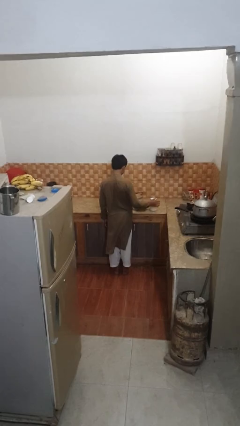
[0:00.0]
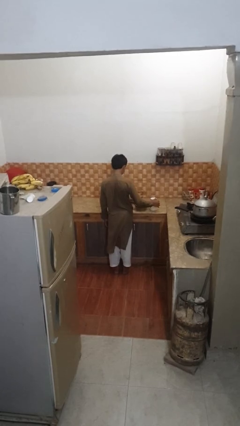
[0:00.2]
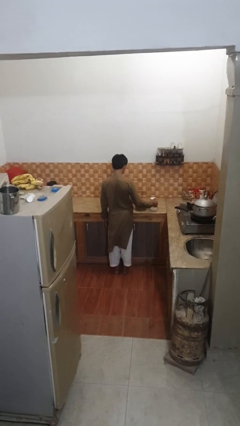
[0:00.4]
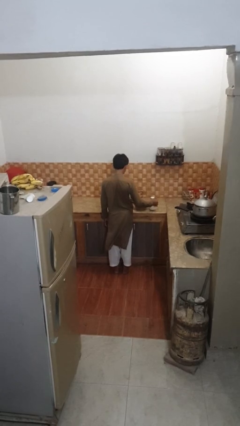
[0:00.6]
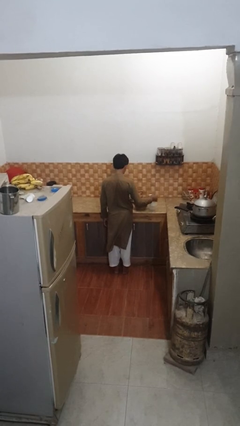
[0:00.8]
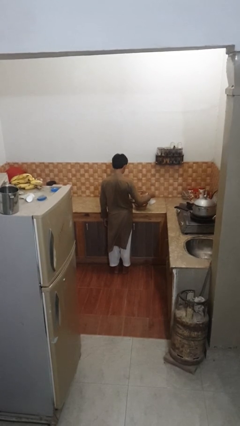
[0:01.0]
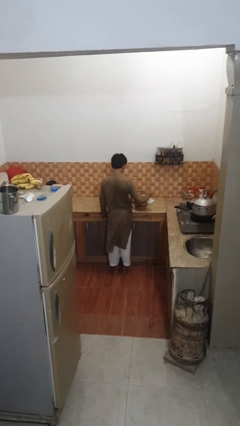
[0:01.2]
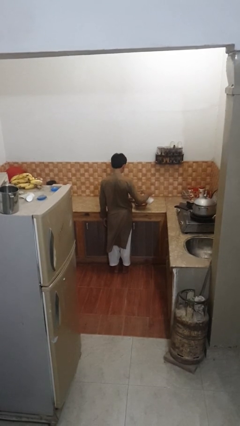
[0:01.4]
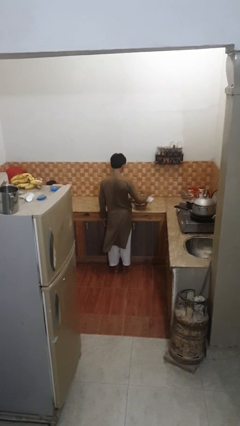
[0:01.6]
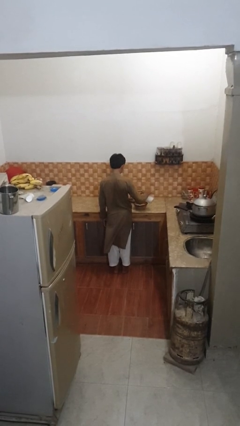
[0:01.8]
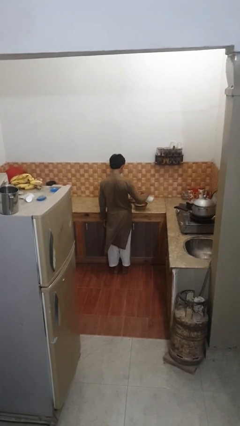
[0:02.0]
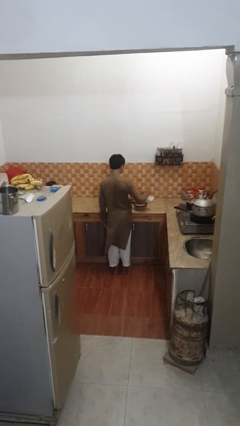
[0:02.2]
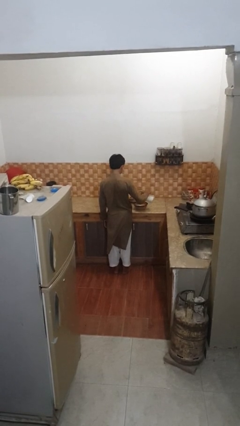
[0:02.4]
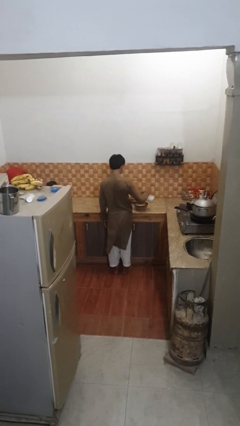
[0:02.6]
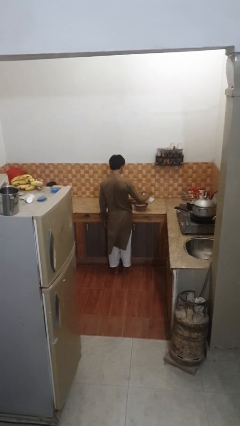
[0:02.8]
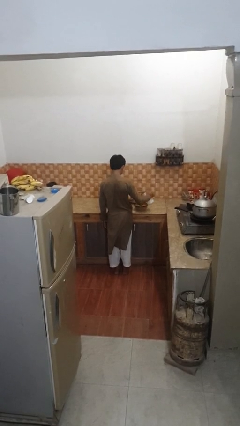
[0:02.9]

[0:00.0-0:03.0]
person pours into bowl

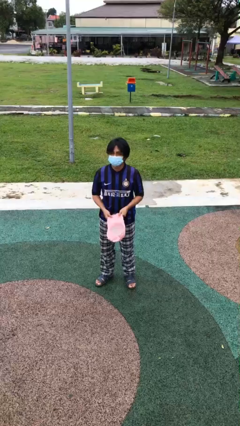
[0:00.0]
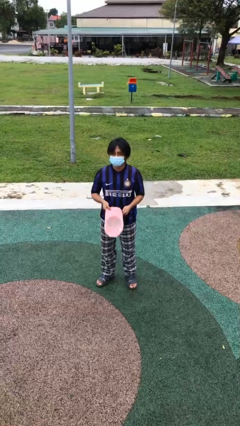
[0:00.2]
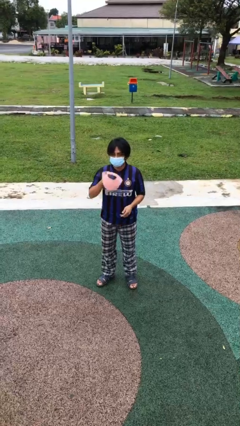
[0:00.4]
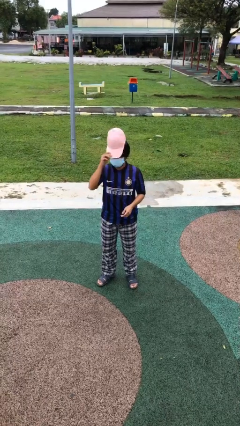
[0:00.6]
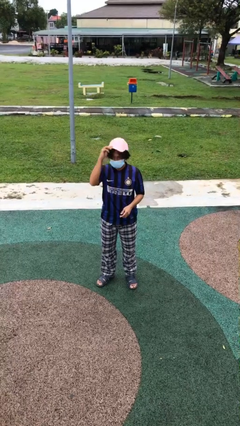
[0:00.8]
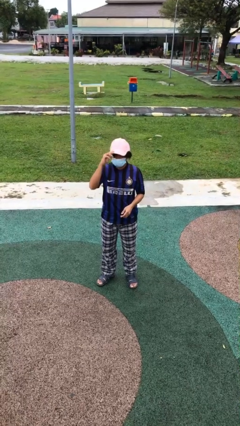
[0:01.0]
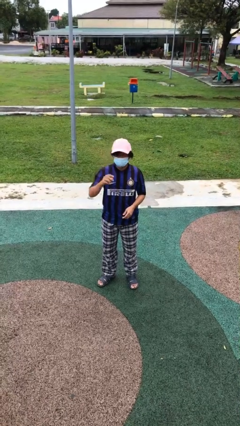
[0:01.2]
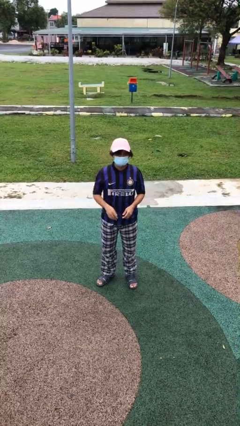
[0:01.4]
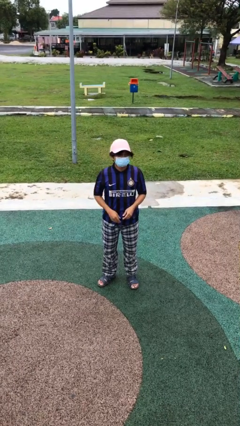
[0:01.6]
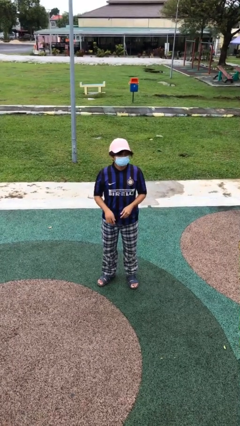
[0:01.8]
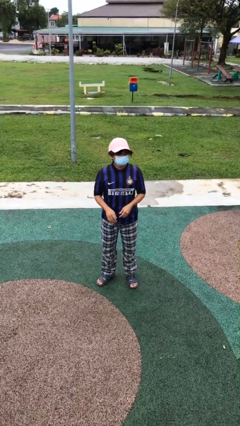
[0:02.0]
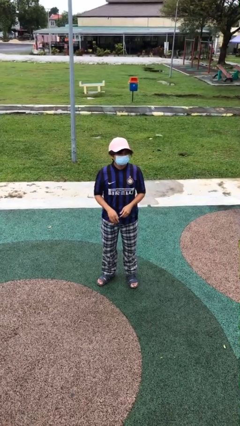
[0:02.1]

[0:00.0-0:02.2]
person puts on hat

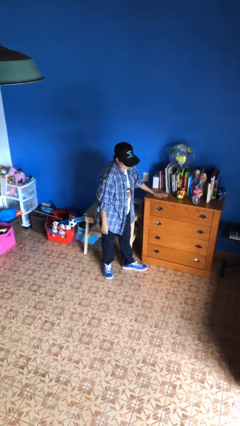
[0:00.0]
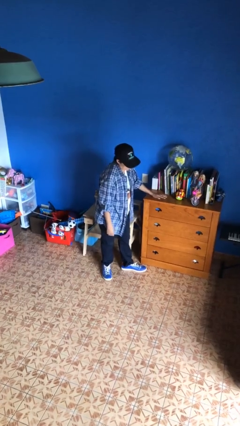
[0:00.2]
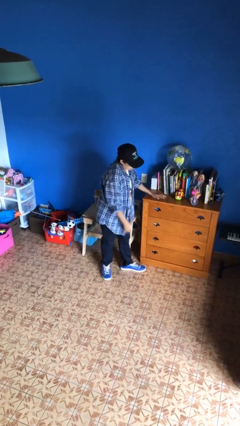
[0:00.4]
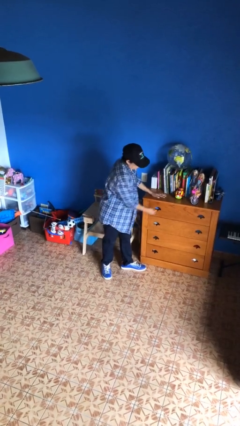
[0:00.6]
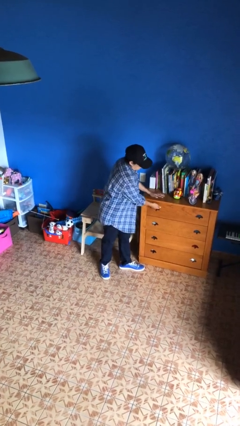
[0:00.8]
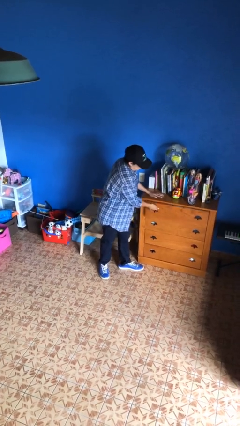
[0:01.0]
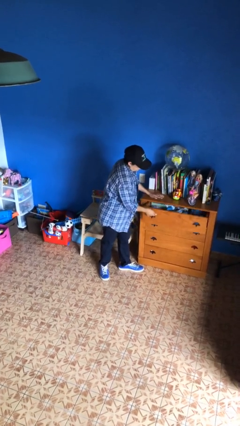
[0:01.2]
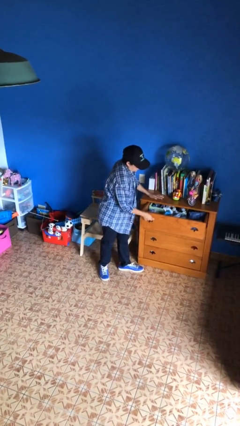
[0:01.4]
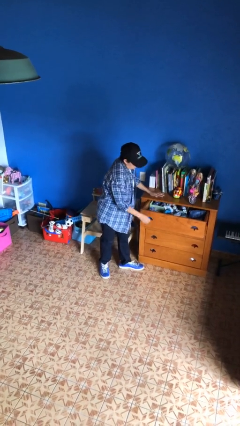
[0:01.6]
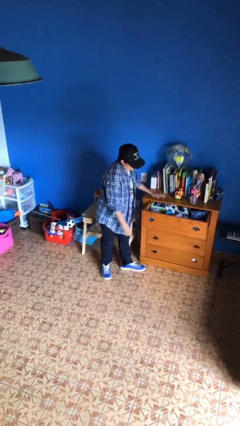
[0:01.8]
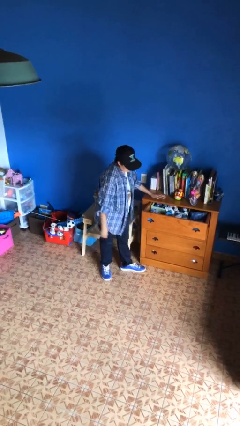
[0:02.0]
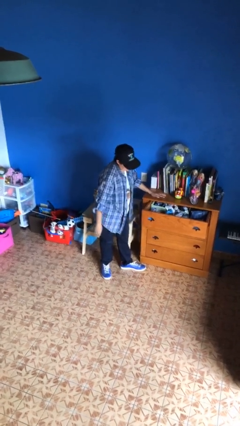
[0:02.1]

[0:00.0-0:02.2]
person opens dresser drawer

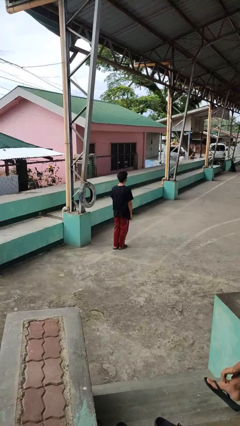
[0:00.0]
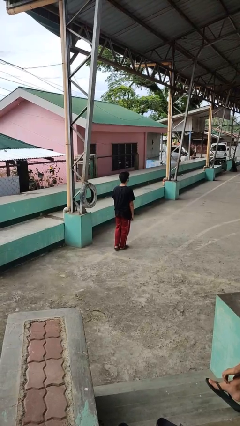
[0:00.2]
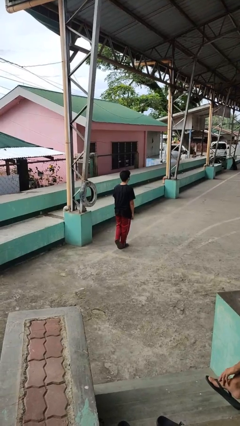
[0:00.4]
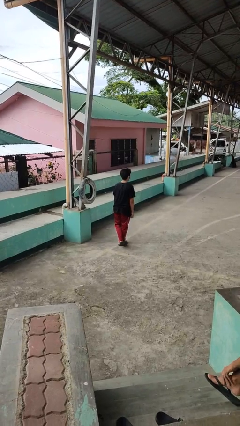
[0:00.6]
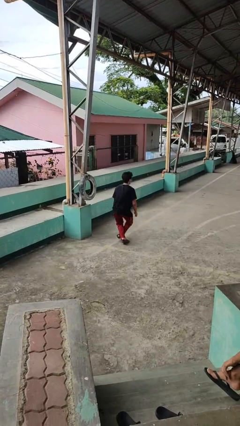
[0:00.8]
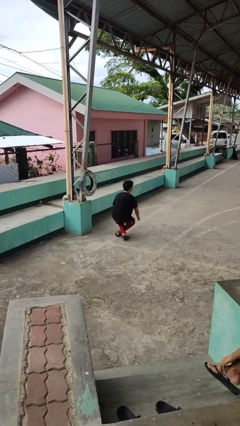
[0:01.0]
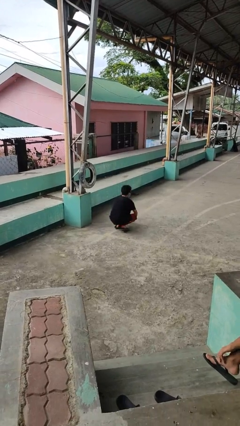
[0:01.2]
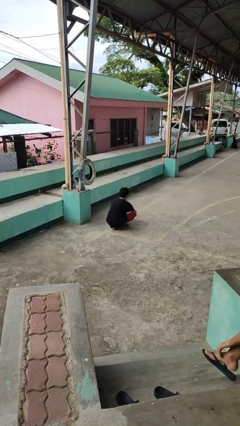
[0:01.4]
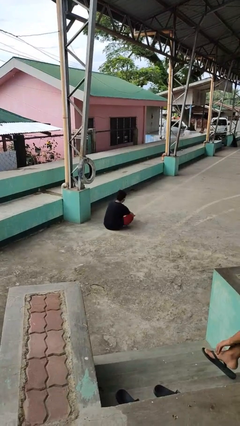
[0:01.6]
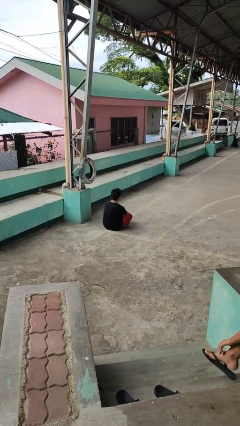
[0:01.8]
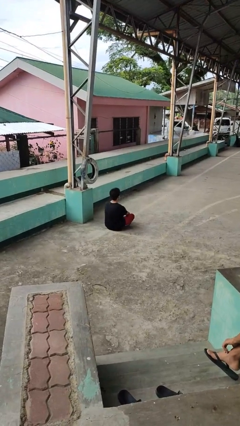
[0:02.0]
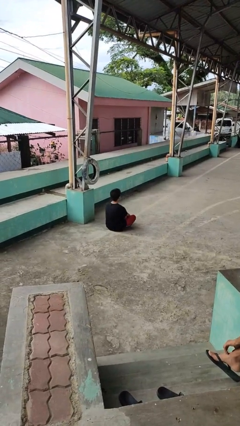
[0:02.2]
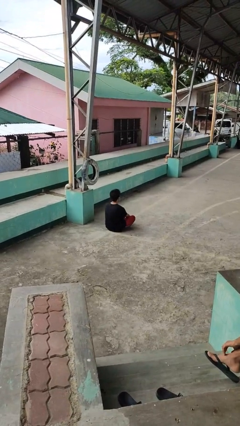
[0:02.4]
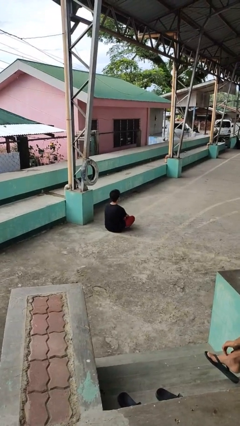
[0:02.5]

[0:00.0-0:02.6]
person sits crisscross

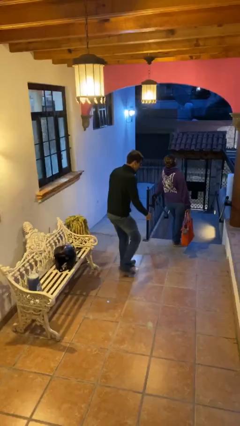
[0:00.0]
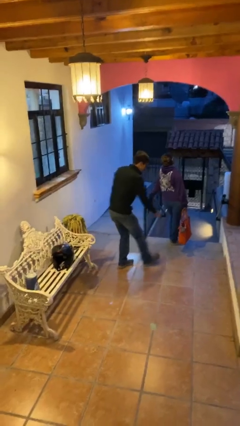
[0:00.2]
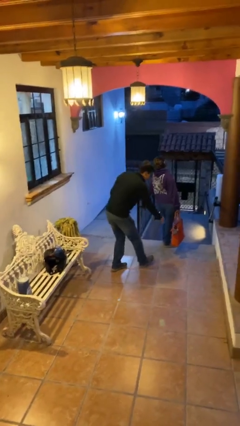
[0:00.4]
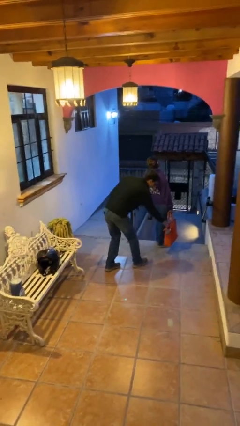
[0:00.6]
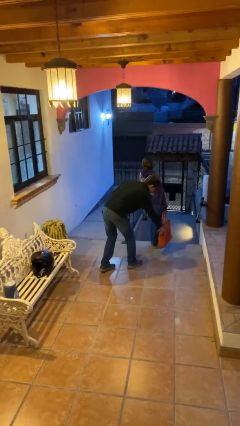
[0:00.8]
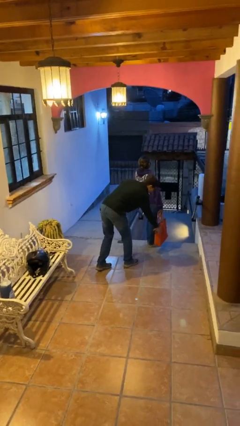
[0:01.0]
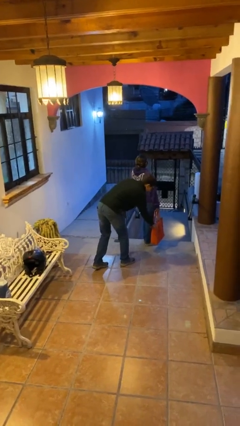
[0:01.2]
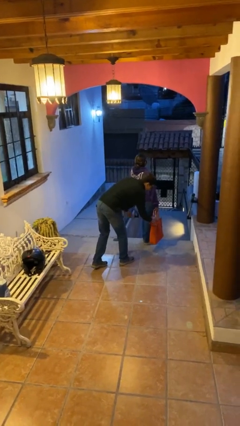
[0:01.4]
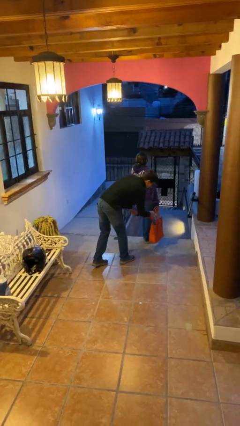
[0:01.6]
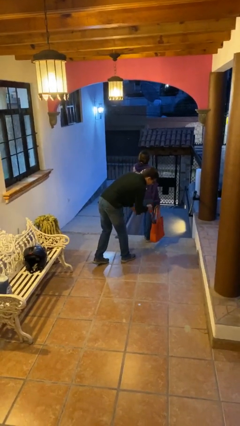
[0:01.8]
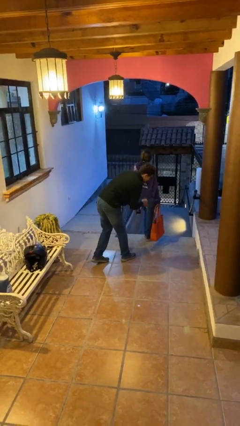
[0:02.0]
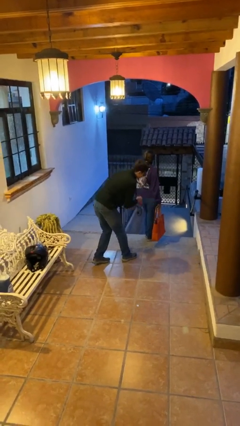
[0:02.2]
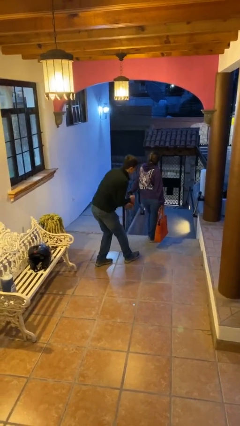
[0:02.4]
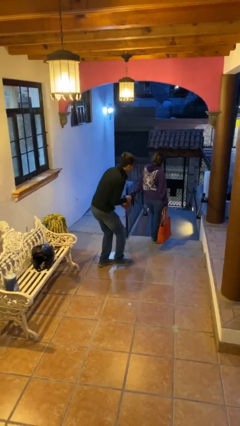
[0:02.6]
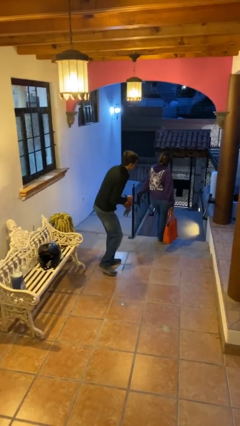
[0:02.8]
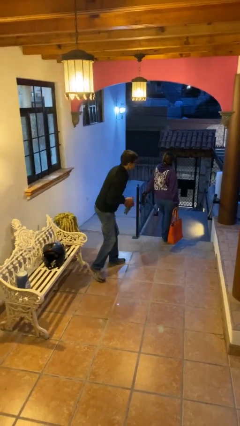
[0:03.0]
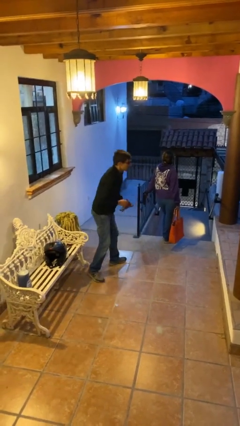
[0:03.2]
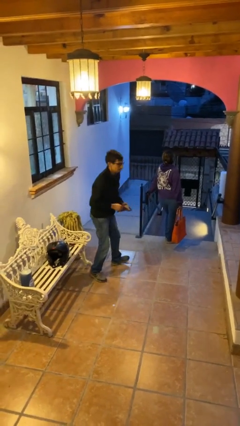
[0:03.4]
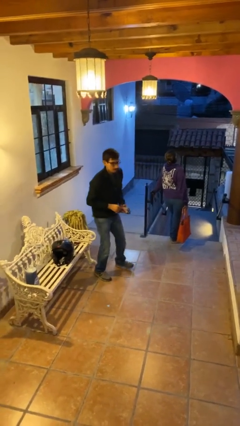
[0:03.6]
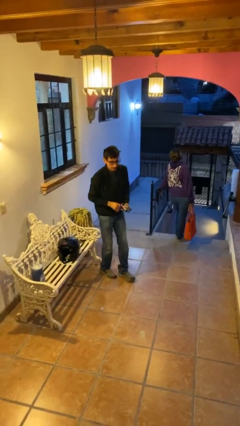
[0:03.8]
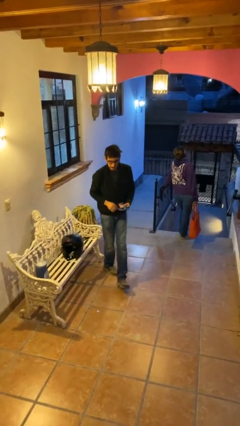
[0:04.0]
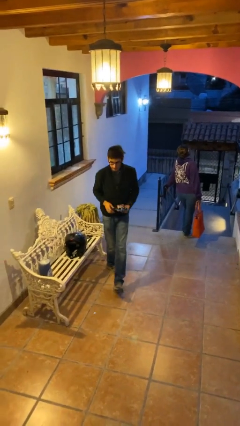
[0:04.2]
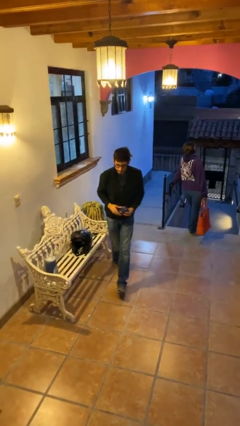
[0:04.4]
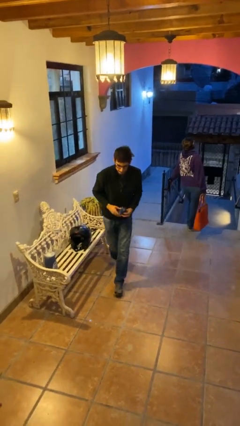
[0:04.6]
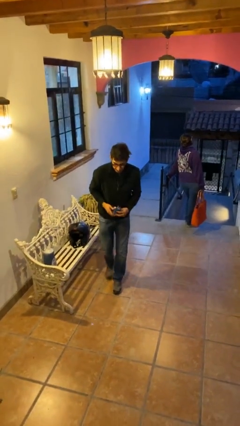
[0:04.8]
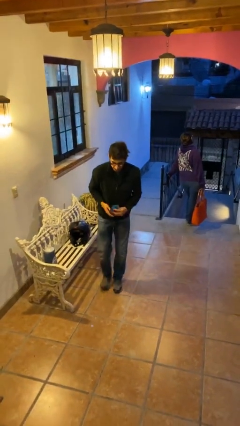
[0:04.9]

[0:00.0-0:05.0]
person steals object from person

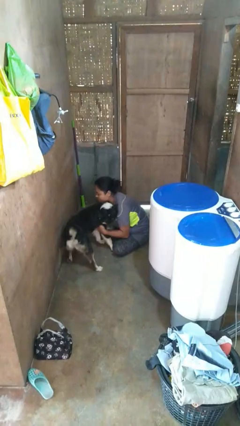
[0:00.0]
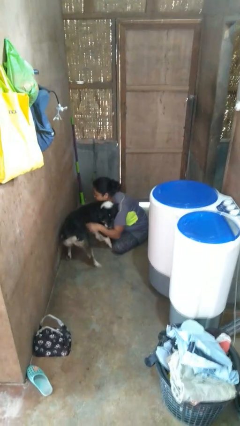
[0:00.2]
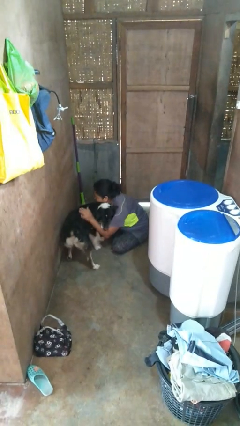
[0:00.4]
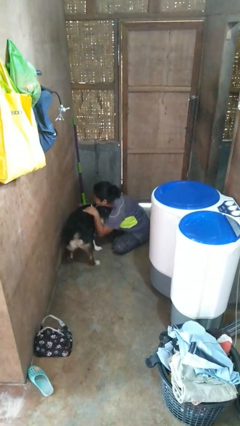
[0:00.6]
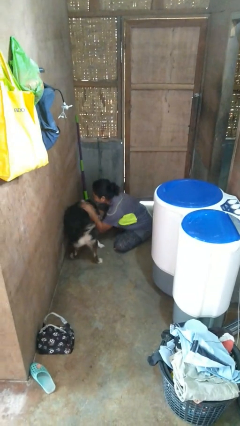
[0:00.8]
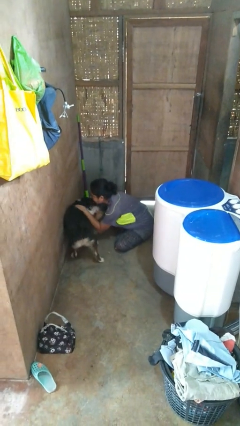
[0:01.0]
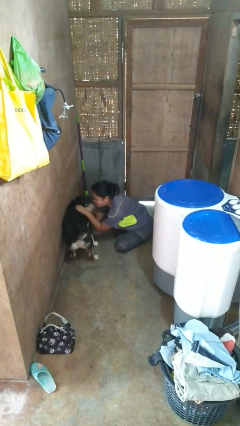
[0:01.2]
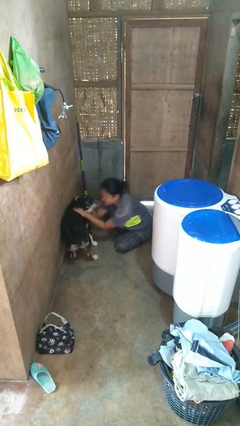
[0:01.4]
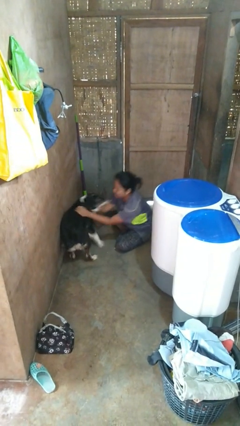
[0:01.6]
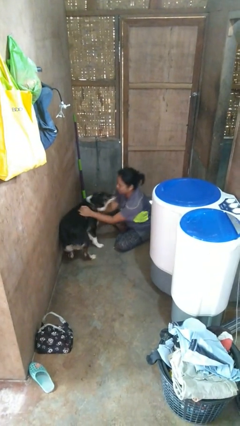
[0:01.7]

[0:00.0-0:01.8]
person hugs dog

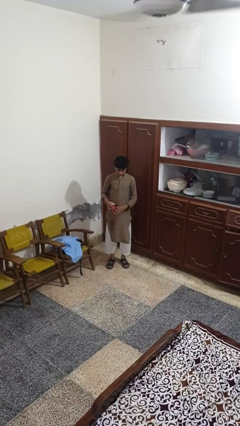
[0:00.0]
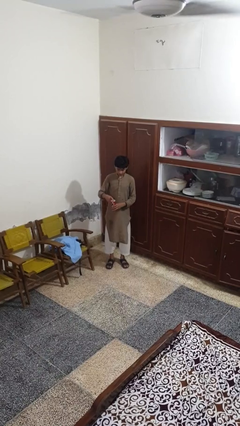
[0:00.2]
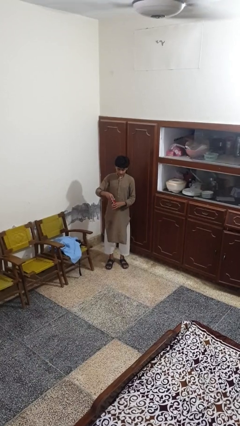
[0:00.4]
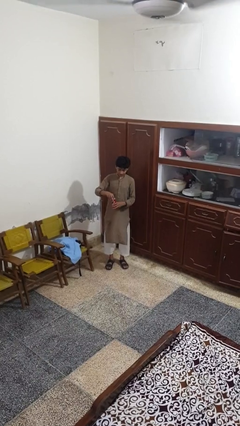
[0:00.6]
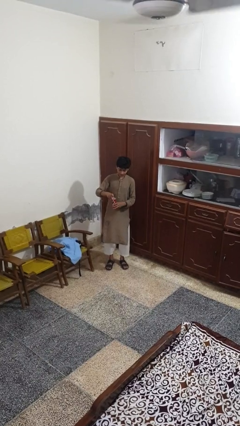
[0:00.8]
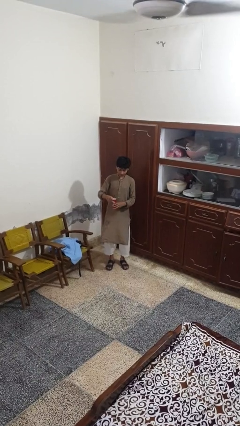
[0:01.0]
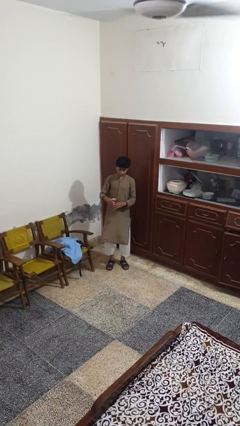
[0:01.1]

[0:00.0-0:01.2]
person opens beverage can
